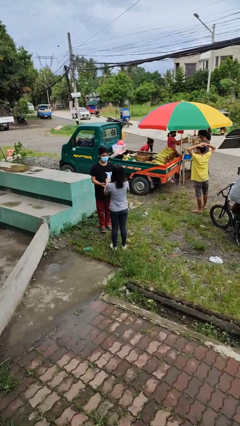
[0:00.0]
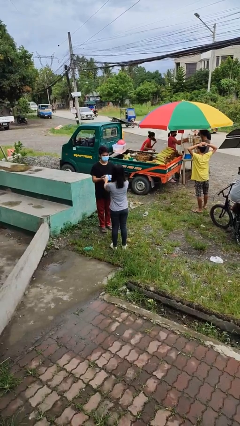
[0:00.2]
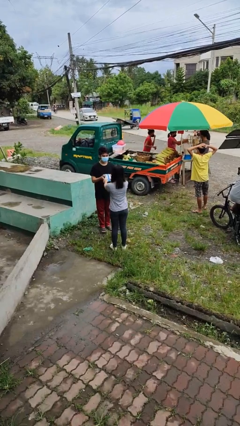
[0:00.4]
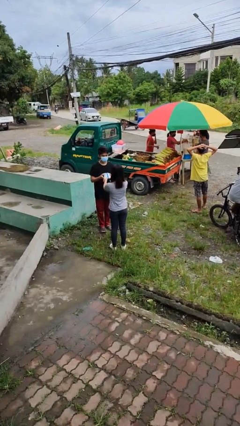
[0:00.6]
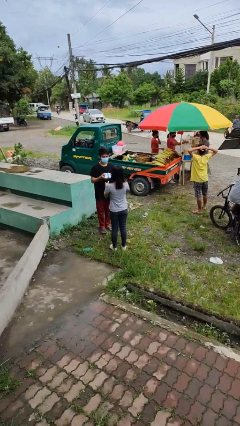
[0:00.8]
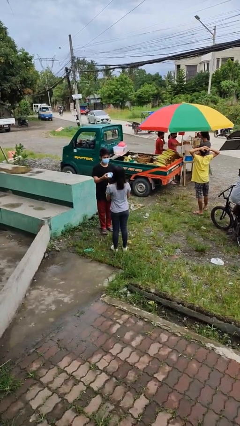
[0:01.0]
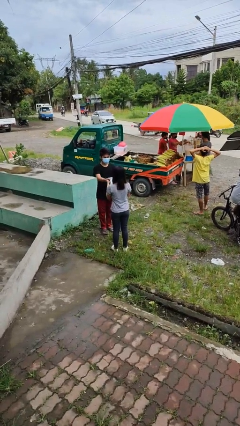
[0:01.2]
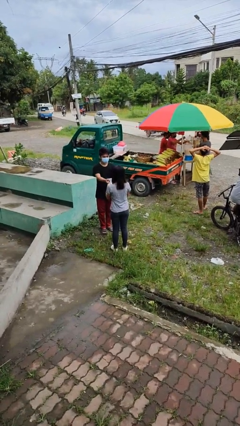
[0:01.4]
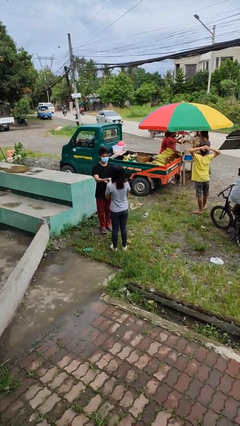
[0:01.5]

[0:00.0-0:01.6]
person transfers object to person

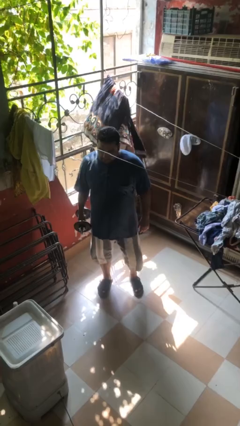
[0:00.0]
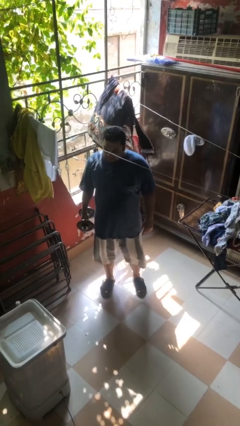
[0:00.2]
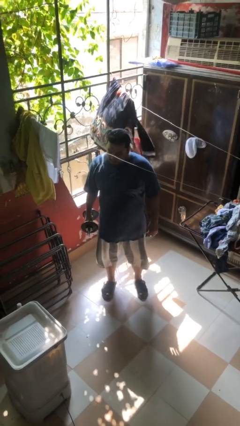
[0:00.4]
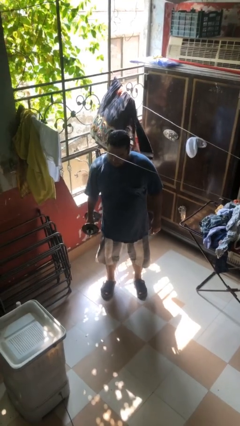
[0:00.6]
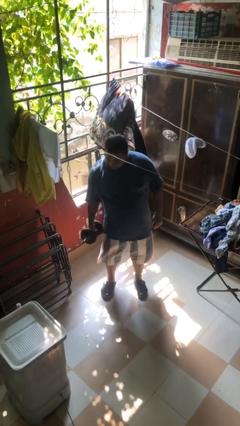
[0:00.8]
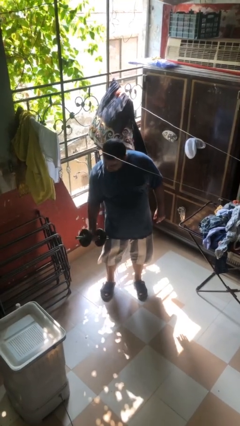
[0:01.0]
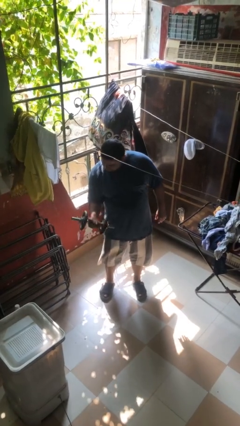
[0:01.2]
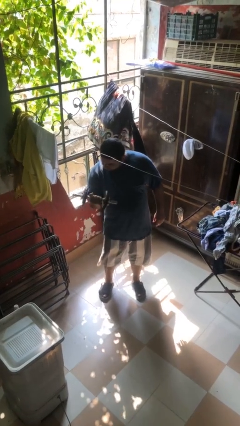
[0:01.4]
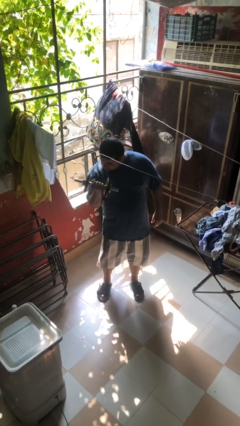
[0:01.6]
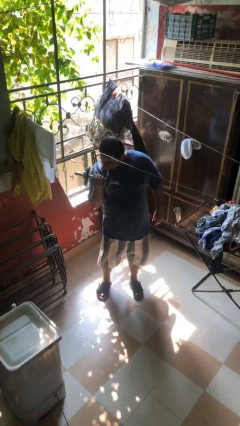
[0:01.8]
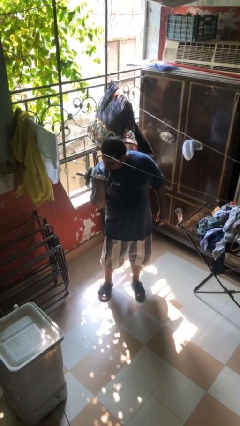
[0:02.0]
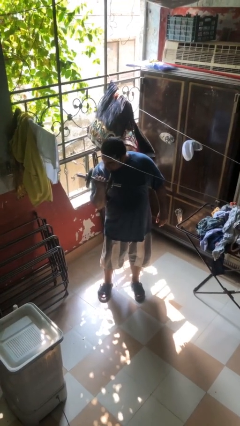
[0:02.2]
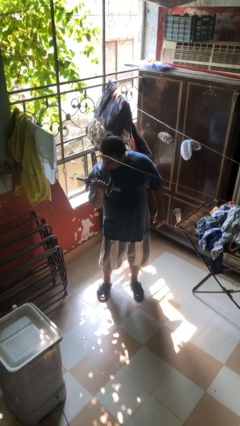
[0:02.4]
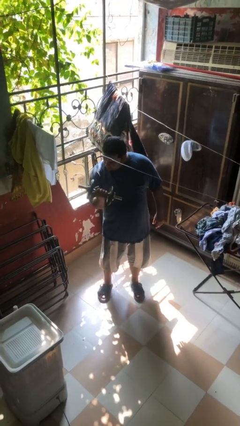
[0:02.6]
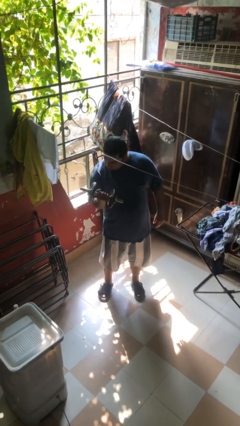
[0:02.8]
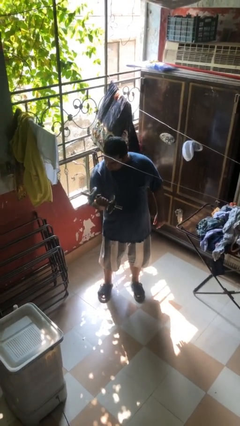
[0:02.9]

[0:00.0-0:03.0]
person lifts dumbbells

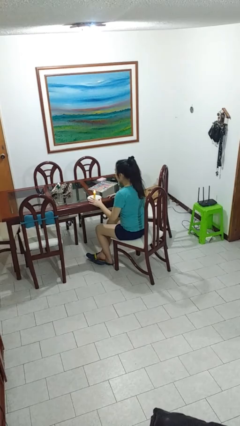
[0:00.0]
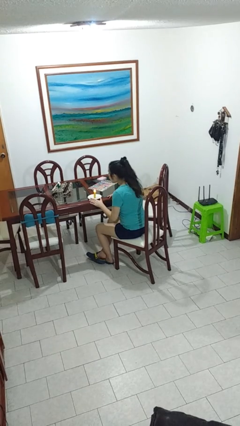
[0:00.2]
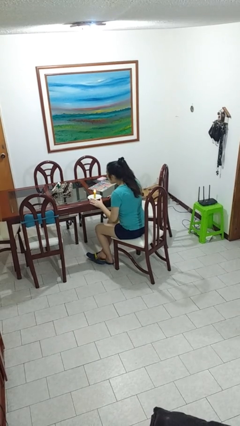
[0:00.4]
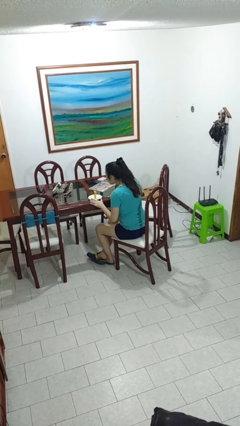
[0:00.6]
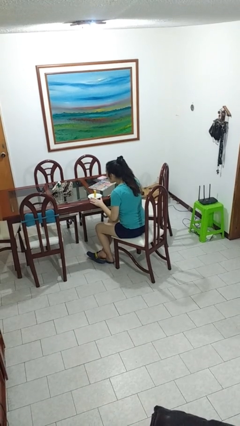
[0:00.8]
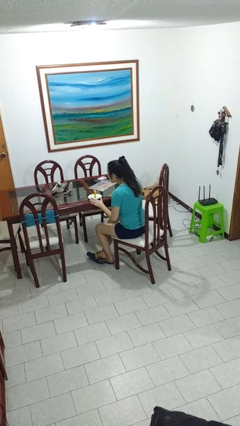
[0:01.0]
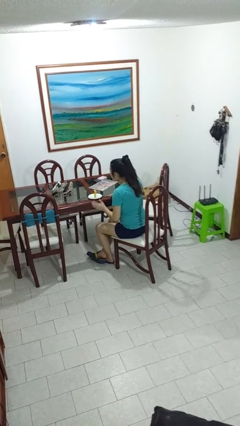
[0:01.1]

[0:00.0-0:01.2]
person extinguishes candle

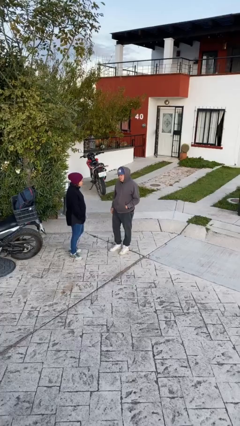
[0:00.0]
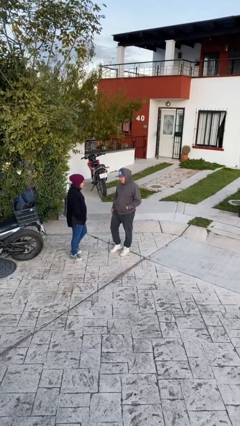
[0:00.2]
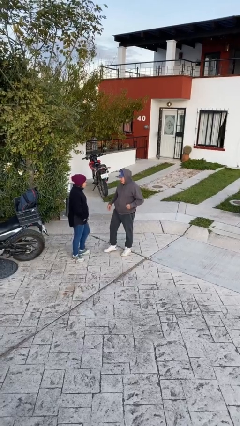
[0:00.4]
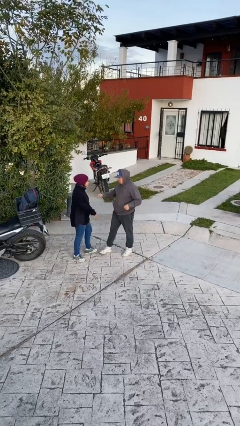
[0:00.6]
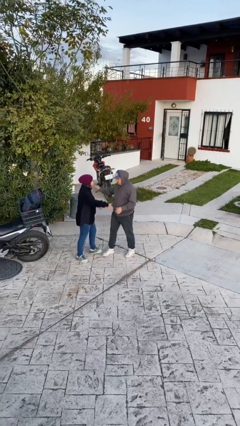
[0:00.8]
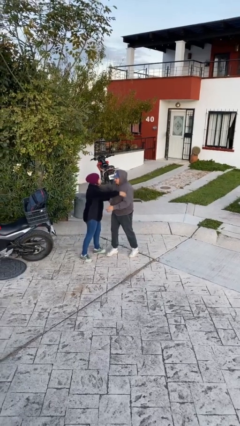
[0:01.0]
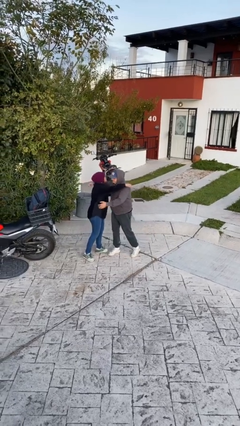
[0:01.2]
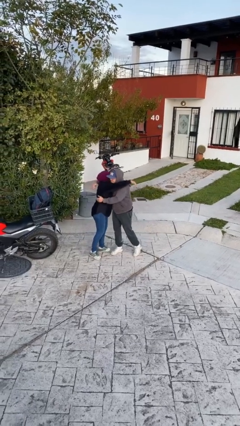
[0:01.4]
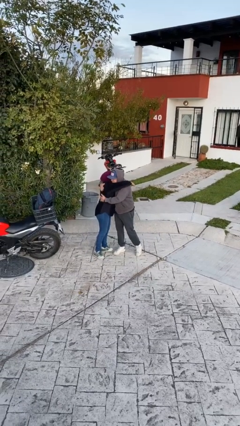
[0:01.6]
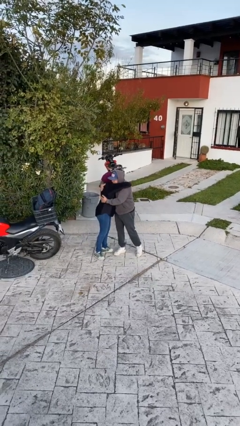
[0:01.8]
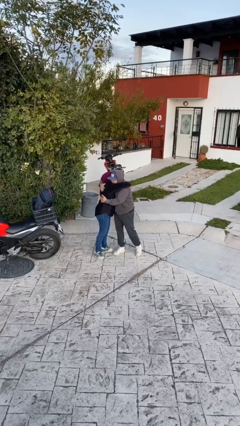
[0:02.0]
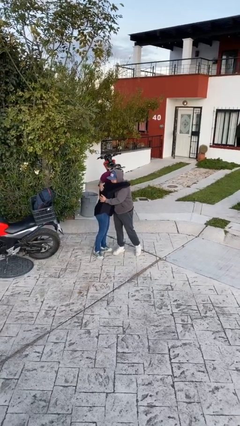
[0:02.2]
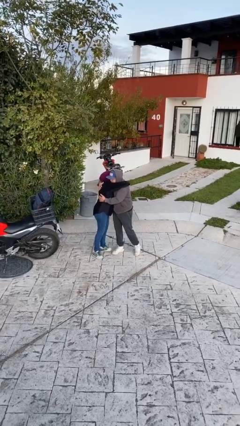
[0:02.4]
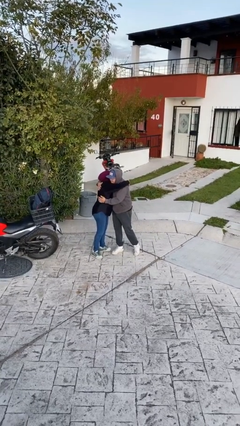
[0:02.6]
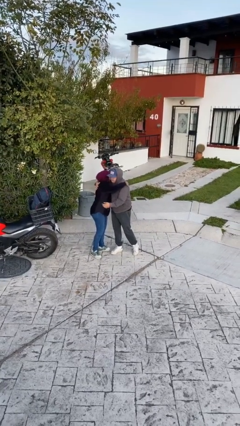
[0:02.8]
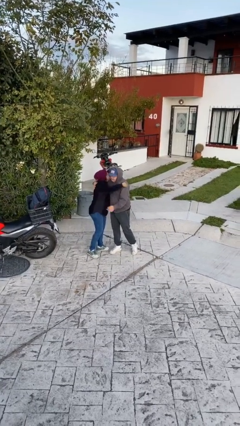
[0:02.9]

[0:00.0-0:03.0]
person embraces person

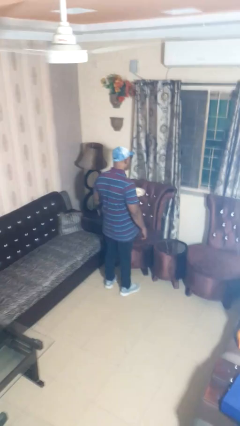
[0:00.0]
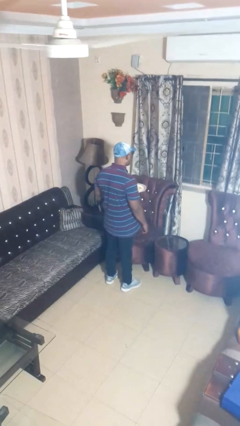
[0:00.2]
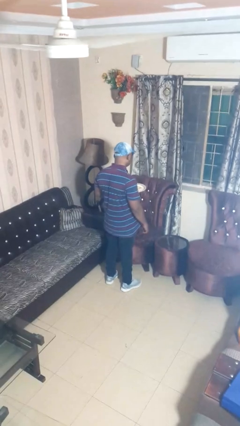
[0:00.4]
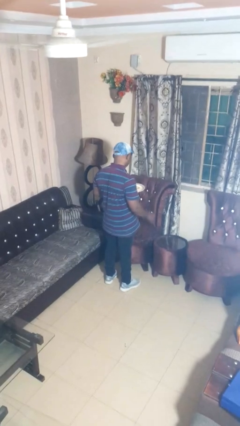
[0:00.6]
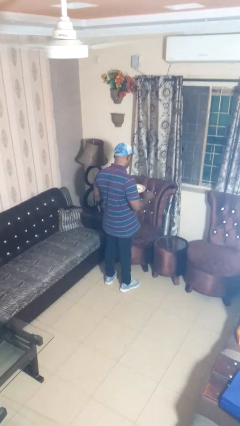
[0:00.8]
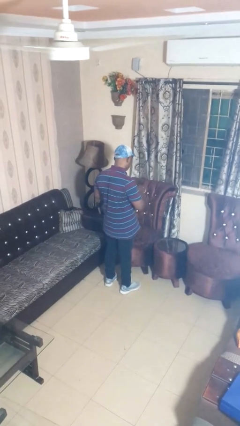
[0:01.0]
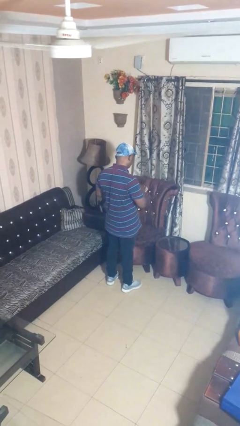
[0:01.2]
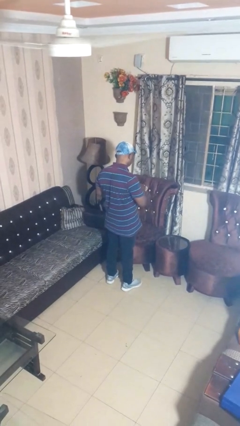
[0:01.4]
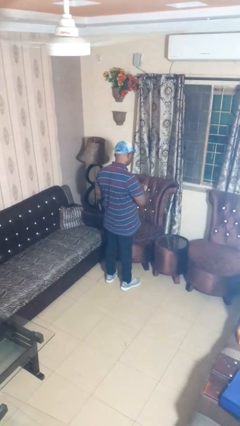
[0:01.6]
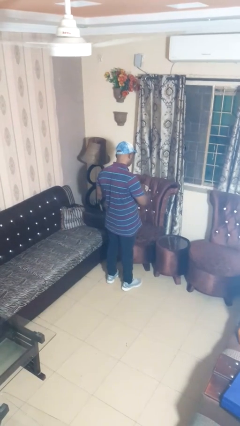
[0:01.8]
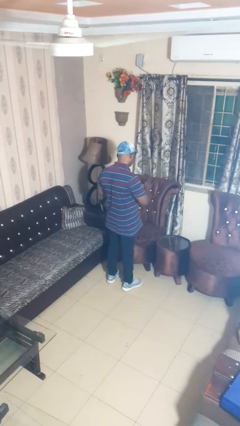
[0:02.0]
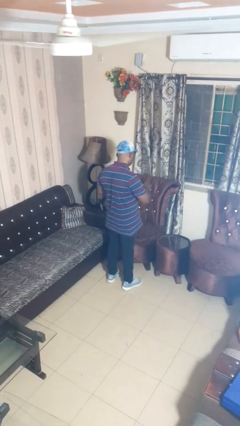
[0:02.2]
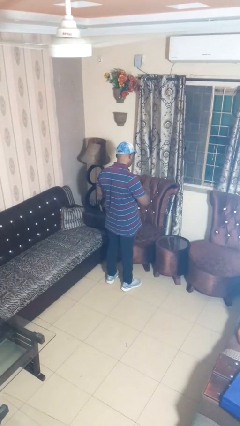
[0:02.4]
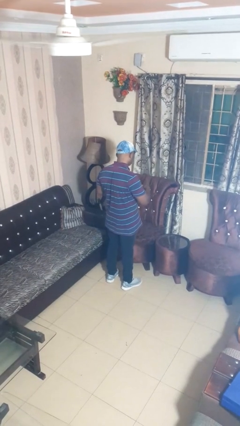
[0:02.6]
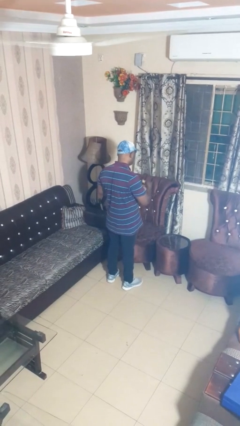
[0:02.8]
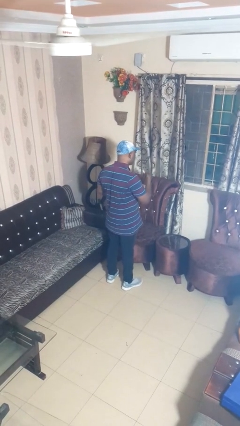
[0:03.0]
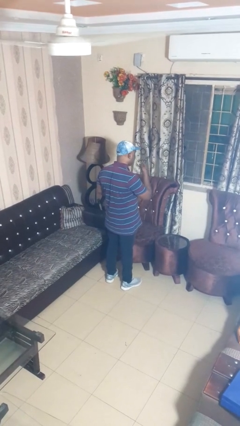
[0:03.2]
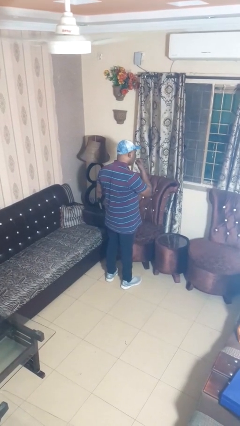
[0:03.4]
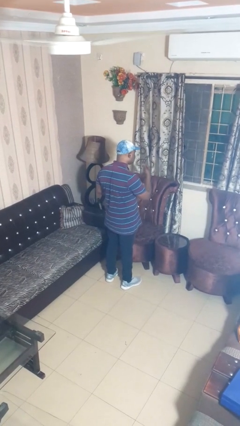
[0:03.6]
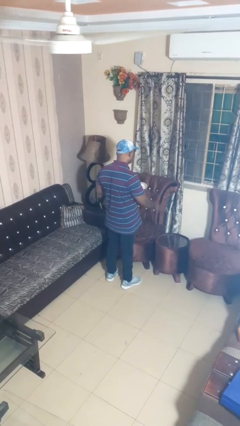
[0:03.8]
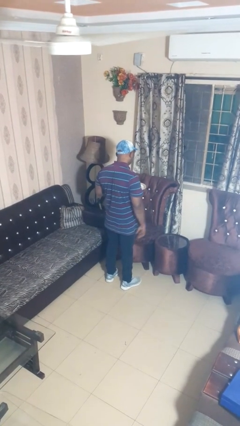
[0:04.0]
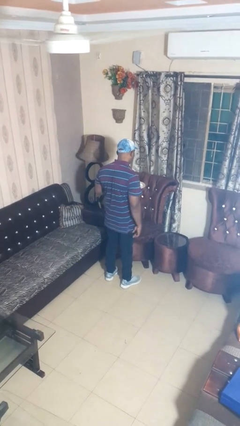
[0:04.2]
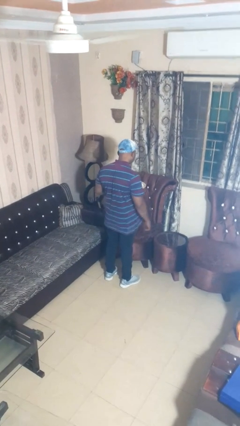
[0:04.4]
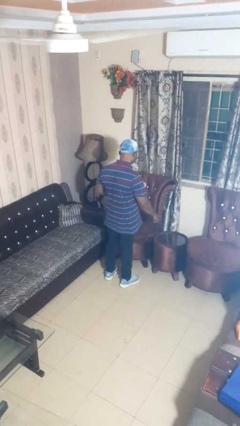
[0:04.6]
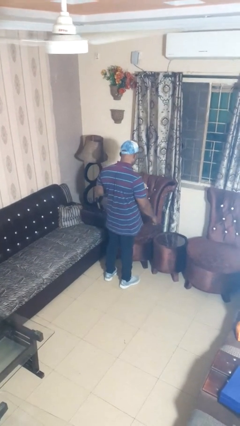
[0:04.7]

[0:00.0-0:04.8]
person eats with hands

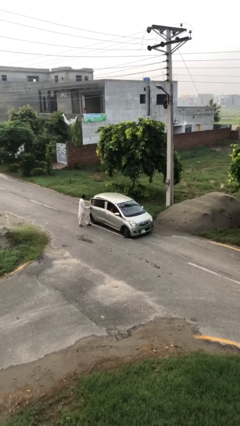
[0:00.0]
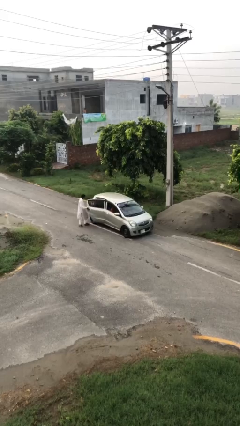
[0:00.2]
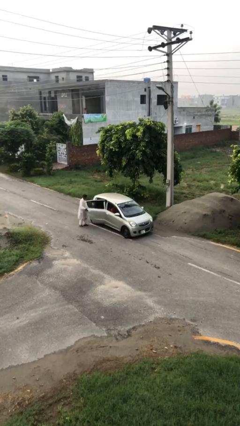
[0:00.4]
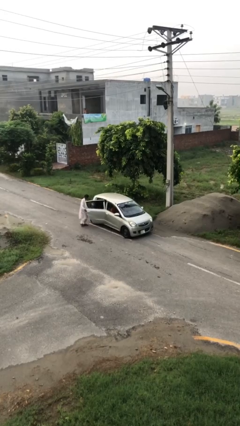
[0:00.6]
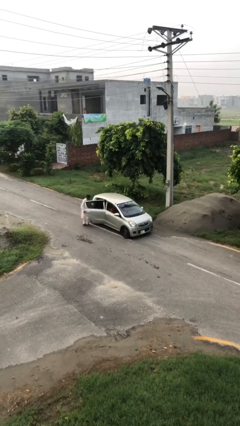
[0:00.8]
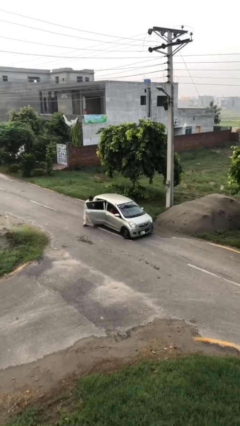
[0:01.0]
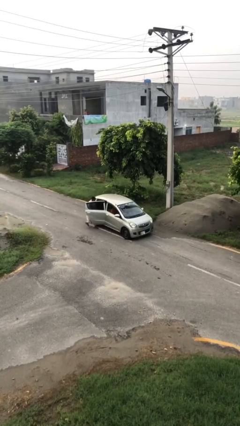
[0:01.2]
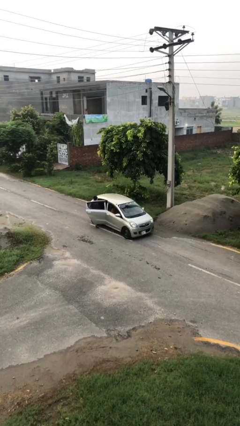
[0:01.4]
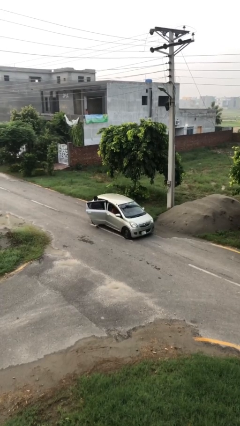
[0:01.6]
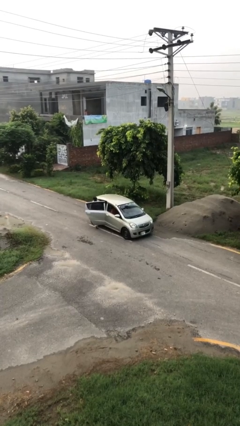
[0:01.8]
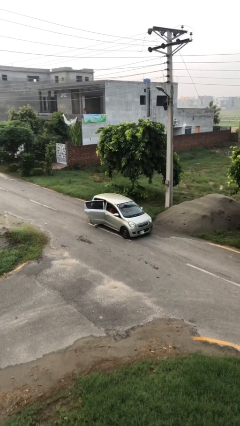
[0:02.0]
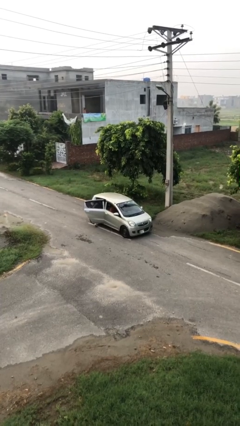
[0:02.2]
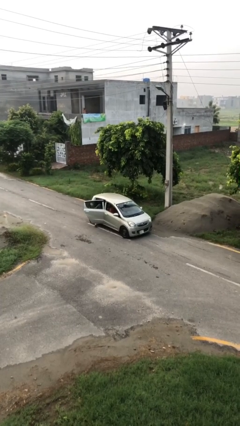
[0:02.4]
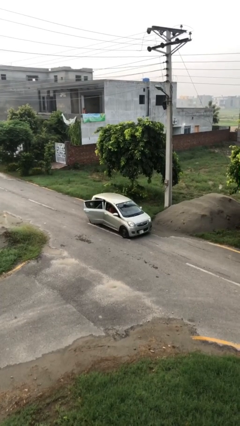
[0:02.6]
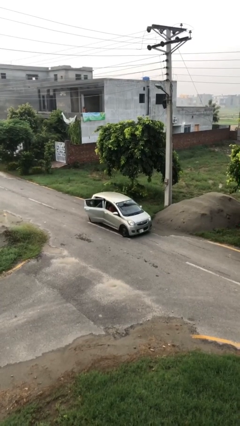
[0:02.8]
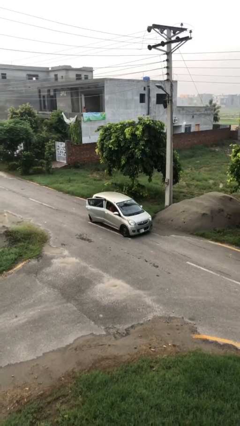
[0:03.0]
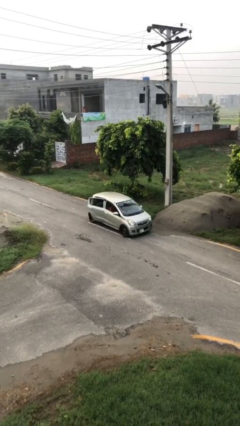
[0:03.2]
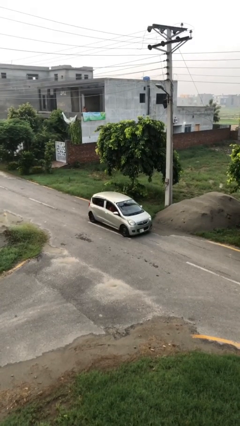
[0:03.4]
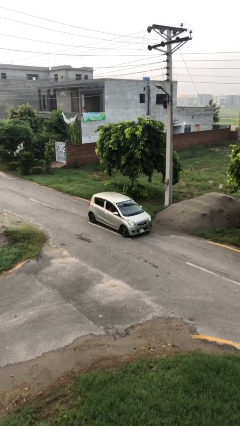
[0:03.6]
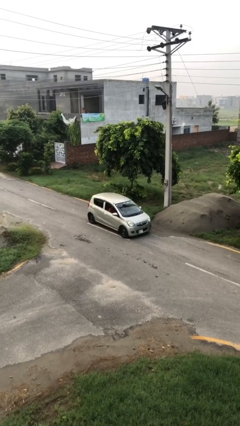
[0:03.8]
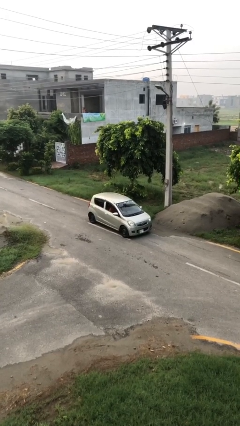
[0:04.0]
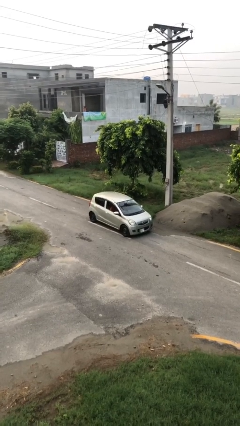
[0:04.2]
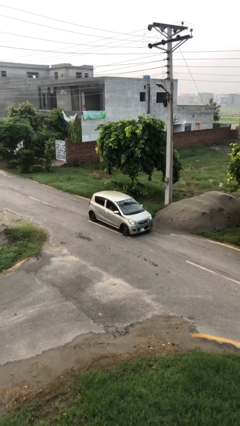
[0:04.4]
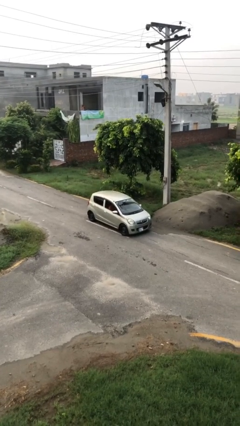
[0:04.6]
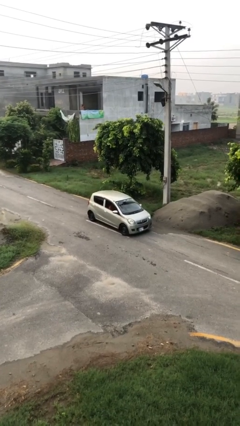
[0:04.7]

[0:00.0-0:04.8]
car picks up person
